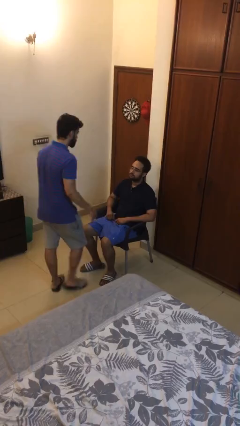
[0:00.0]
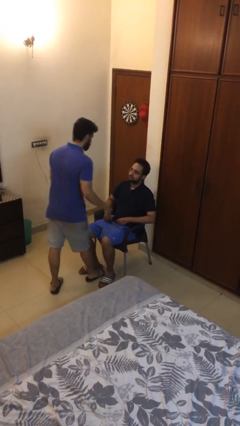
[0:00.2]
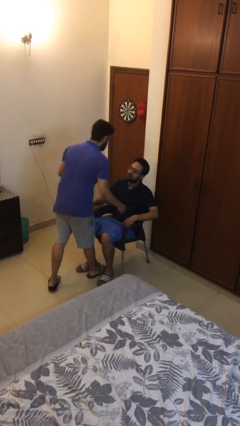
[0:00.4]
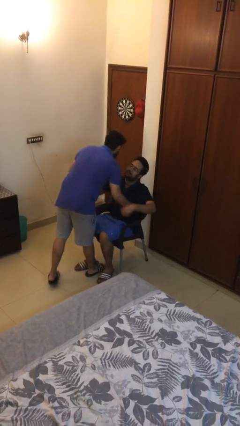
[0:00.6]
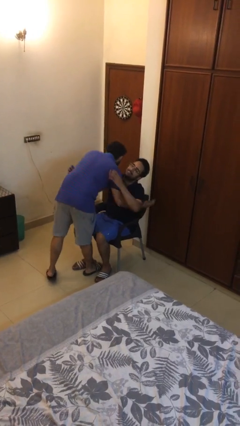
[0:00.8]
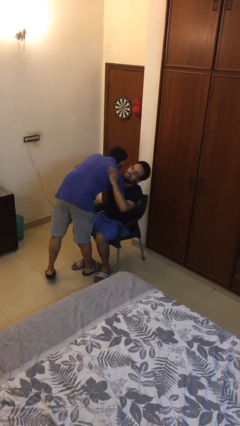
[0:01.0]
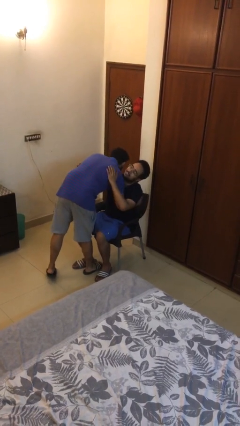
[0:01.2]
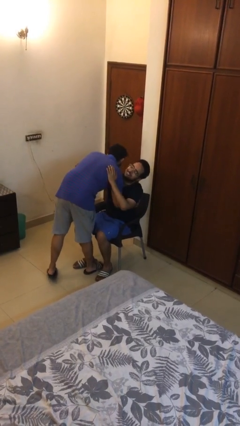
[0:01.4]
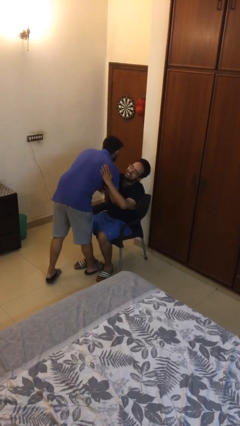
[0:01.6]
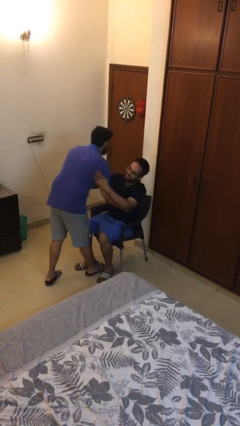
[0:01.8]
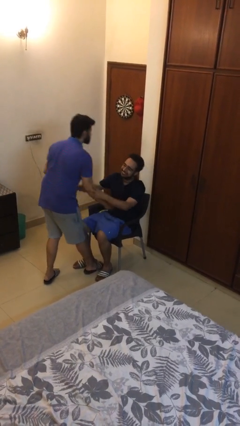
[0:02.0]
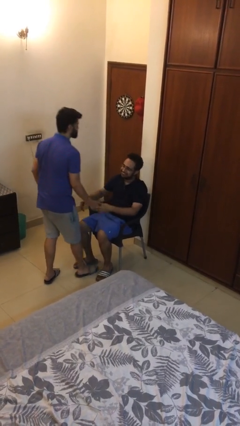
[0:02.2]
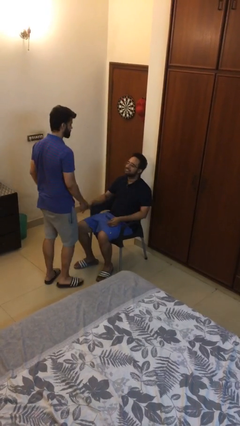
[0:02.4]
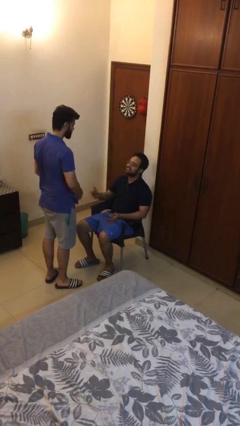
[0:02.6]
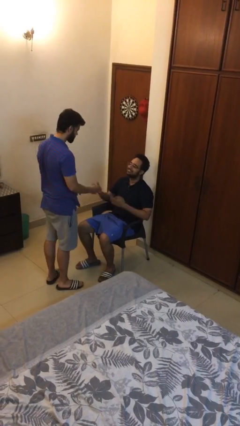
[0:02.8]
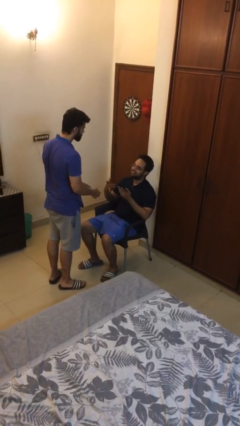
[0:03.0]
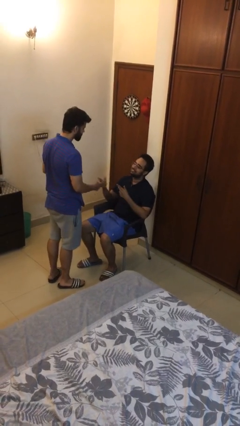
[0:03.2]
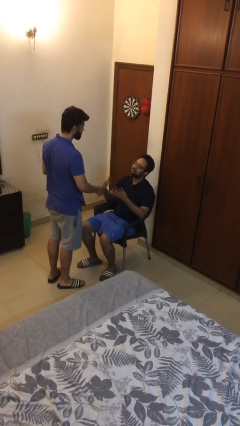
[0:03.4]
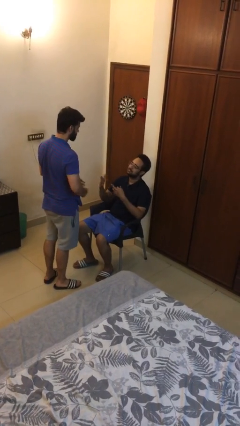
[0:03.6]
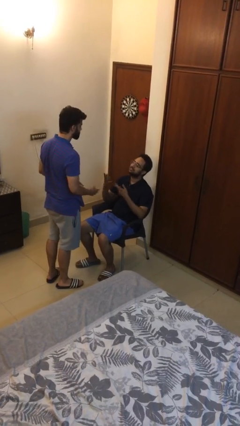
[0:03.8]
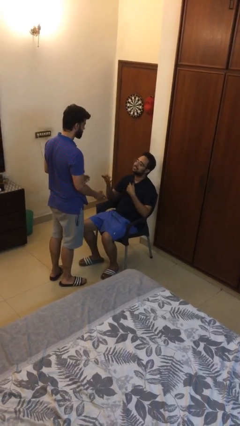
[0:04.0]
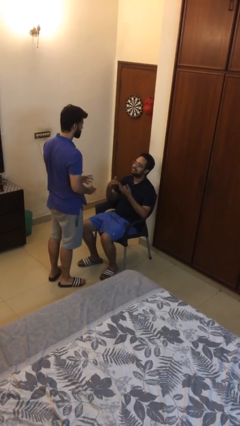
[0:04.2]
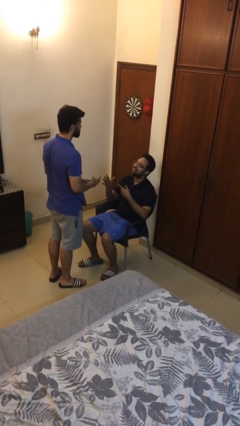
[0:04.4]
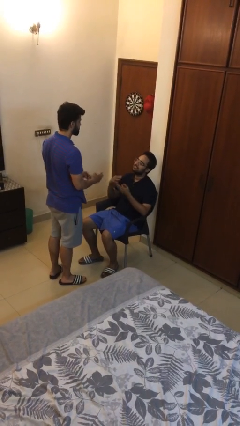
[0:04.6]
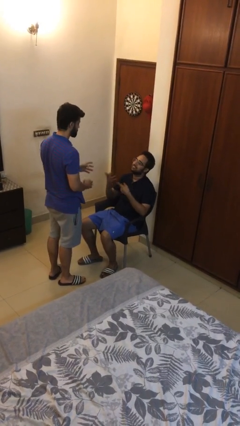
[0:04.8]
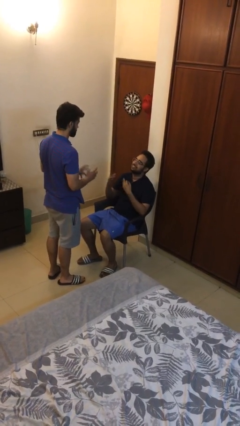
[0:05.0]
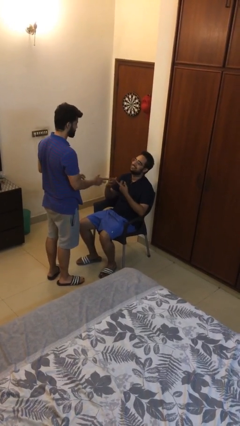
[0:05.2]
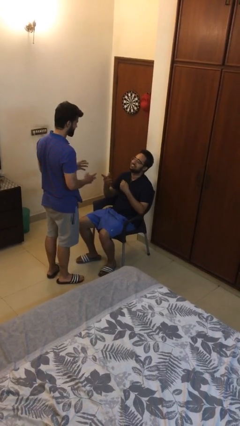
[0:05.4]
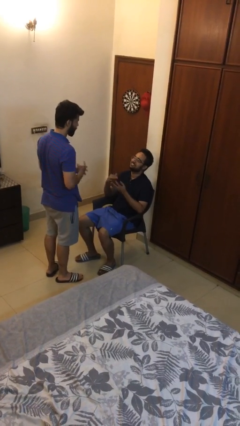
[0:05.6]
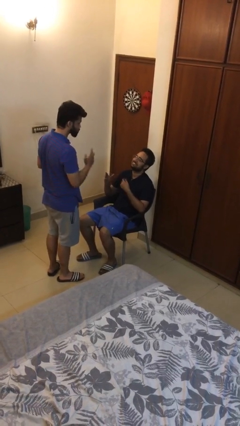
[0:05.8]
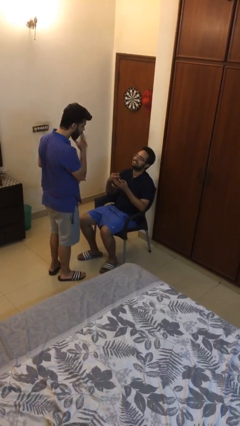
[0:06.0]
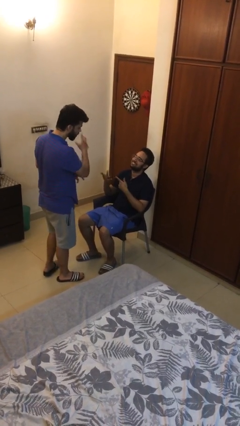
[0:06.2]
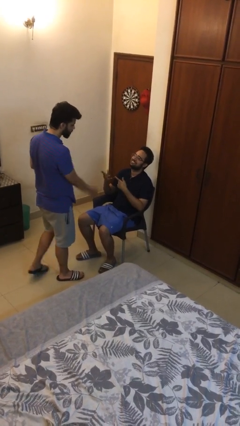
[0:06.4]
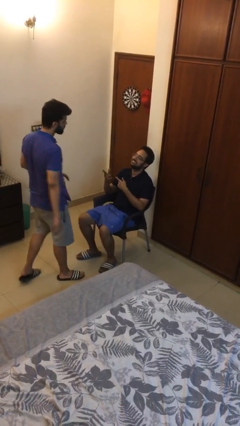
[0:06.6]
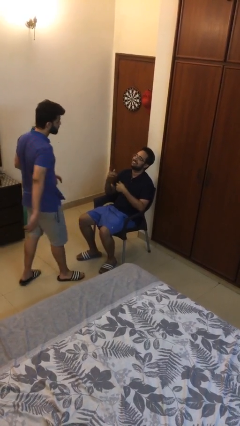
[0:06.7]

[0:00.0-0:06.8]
person embraces person

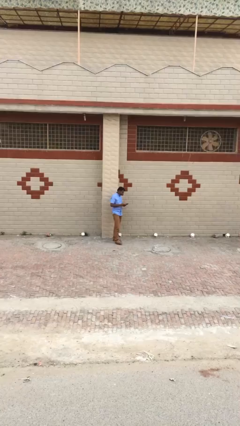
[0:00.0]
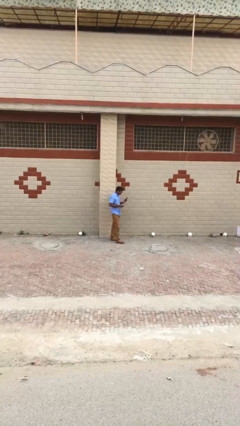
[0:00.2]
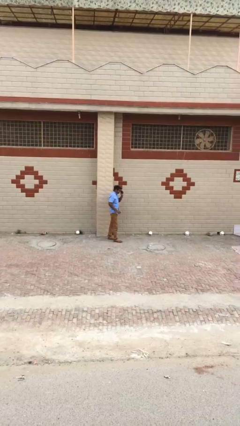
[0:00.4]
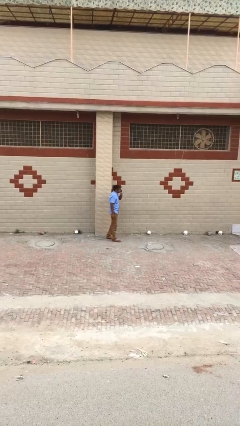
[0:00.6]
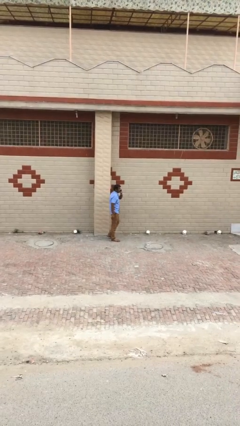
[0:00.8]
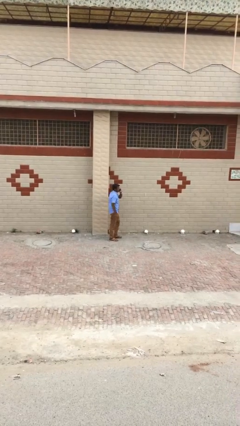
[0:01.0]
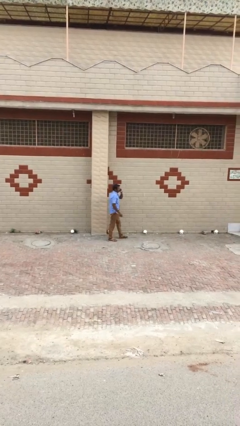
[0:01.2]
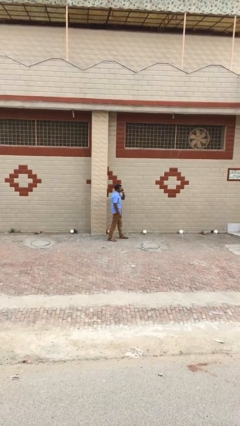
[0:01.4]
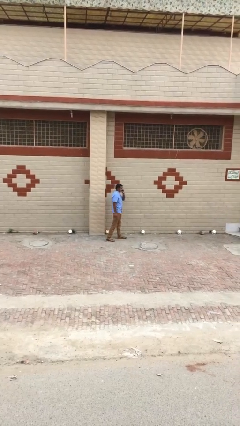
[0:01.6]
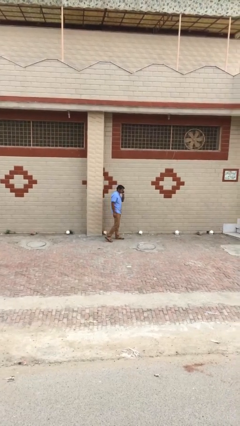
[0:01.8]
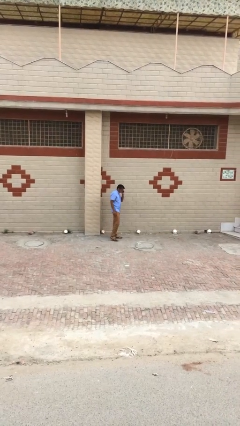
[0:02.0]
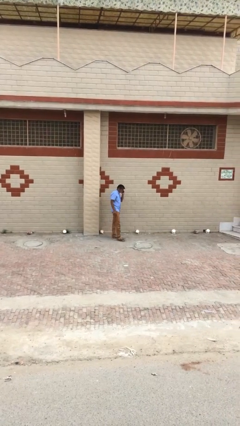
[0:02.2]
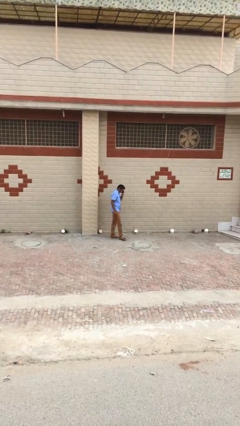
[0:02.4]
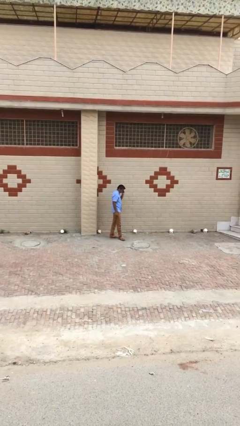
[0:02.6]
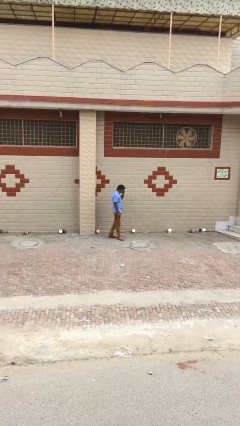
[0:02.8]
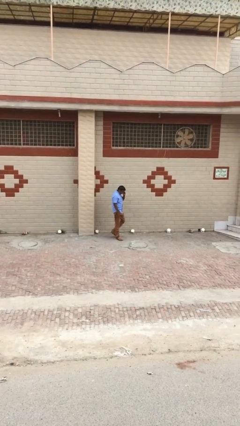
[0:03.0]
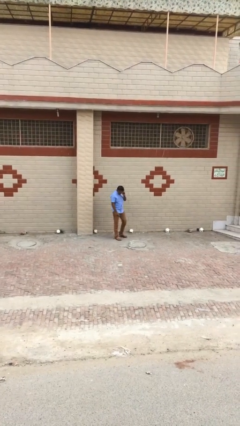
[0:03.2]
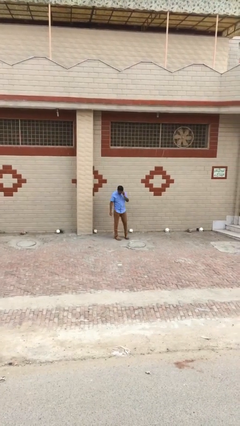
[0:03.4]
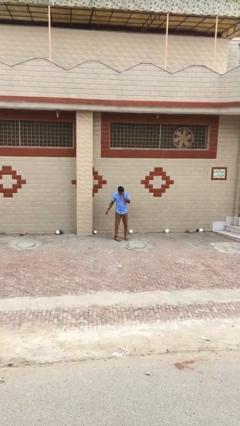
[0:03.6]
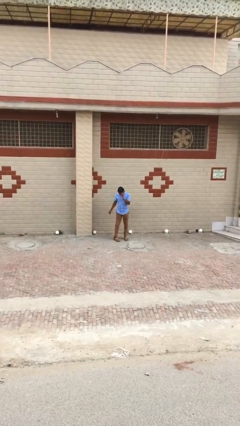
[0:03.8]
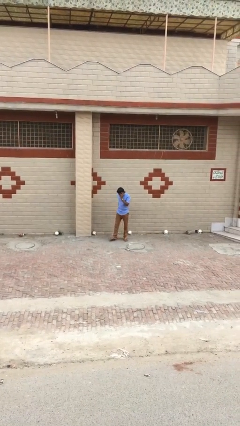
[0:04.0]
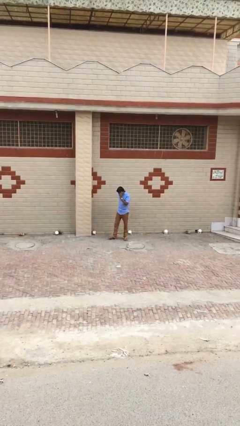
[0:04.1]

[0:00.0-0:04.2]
person talks on phone

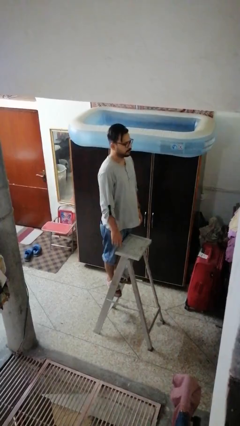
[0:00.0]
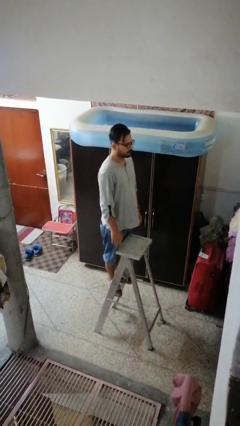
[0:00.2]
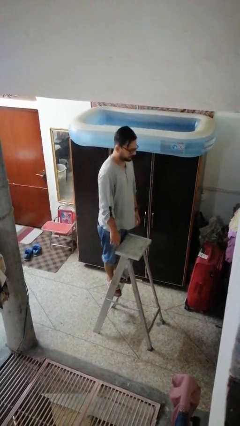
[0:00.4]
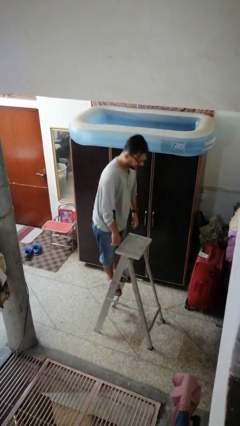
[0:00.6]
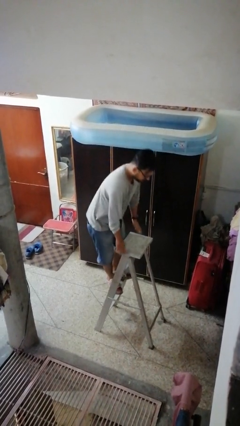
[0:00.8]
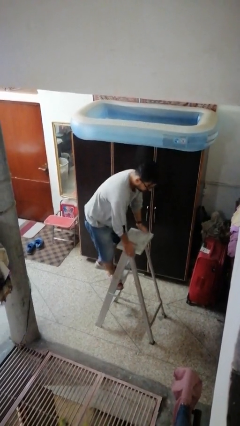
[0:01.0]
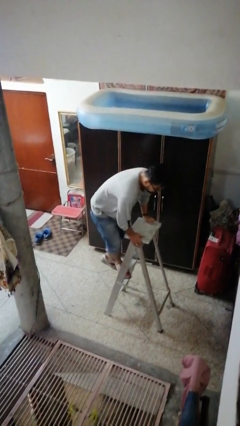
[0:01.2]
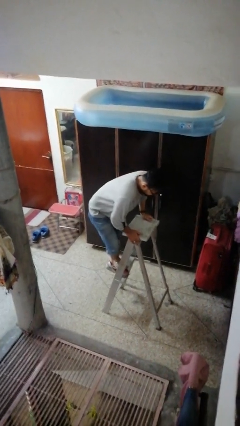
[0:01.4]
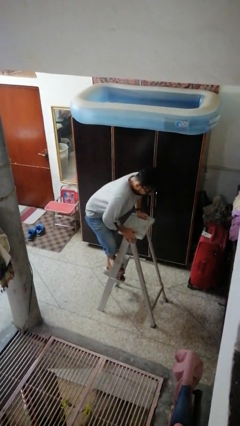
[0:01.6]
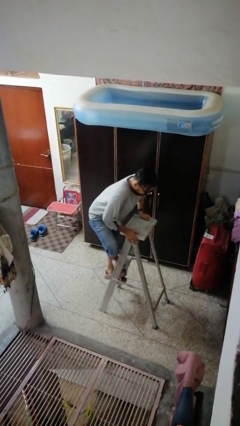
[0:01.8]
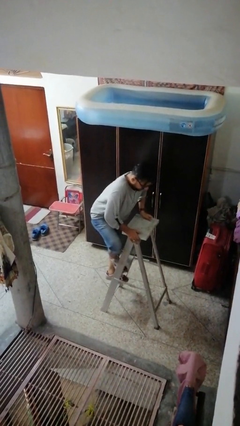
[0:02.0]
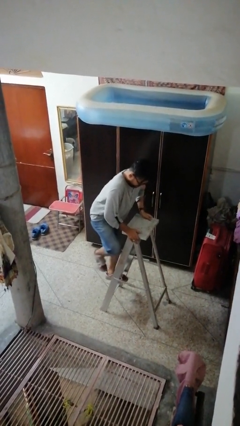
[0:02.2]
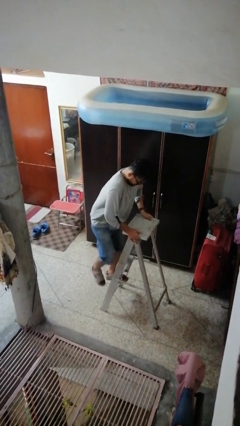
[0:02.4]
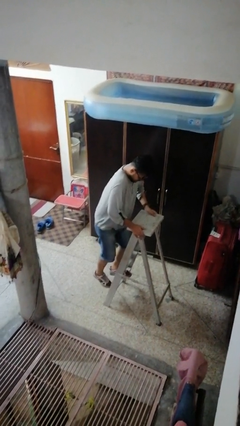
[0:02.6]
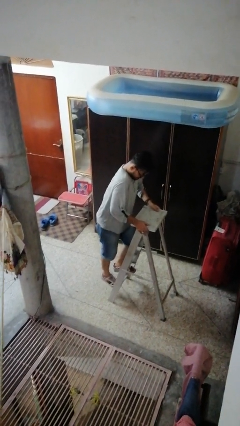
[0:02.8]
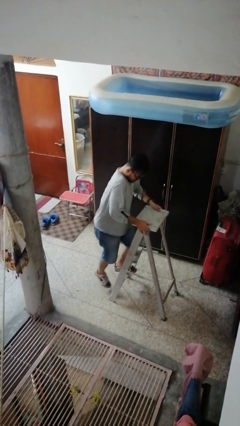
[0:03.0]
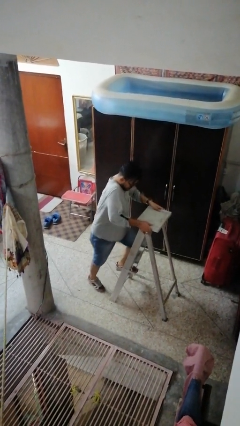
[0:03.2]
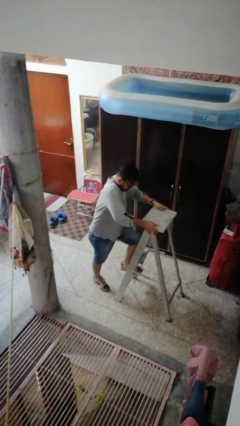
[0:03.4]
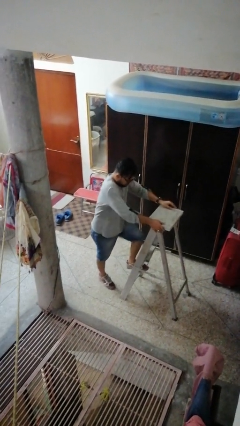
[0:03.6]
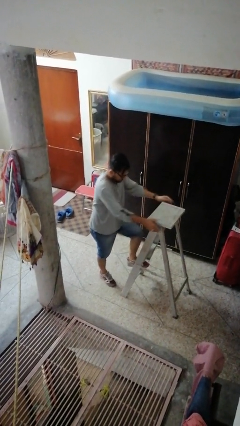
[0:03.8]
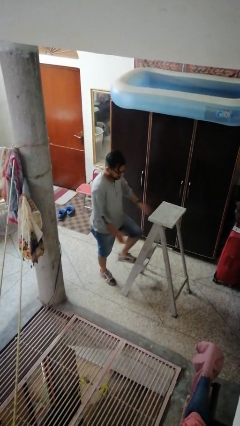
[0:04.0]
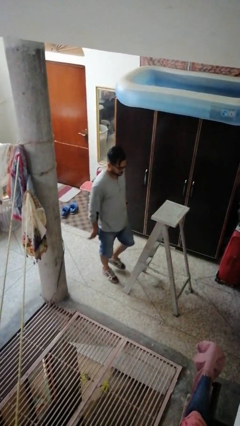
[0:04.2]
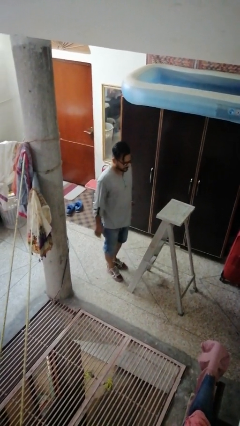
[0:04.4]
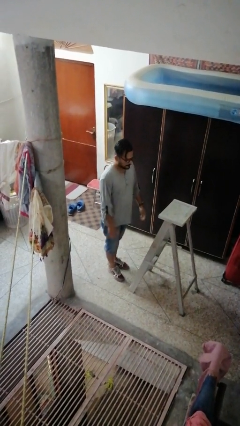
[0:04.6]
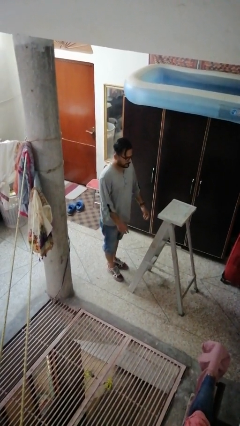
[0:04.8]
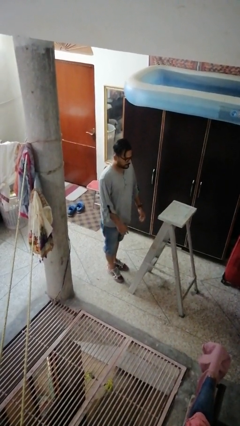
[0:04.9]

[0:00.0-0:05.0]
person climbs down ladder

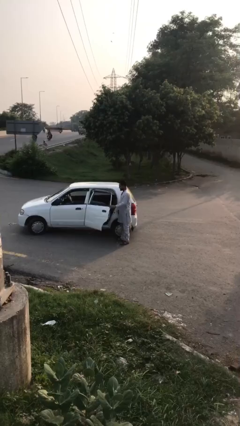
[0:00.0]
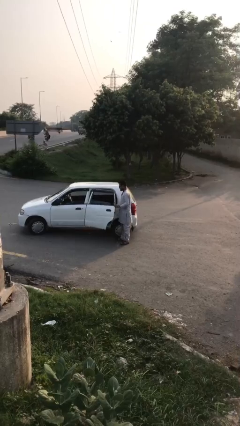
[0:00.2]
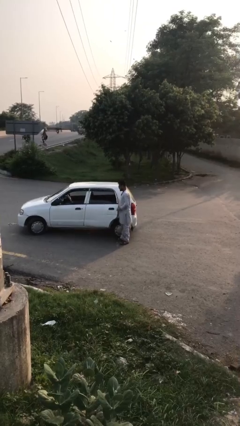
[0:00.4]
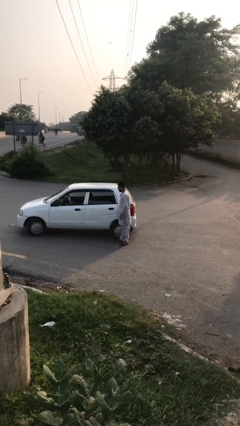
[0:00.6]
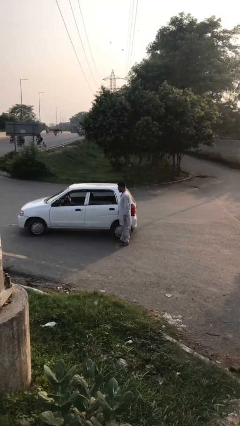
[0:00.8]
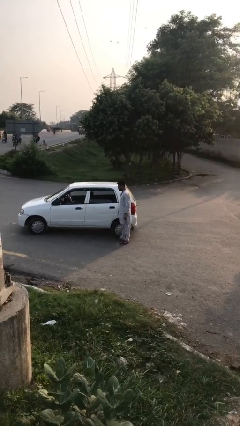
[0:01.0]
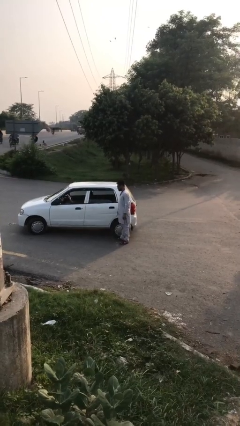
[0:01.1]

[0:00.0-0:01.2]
person closes car door

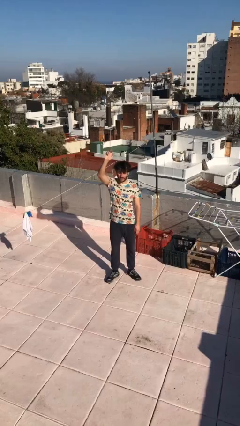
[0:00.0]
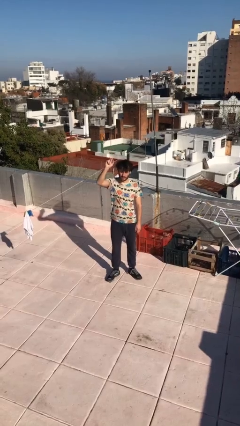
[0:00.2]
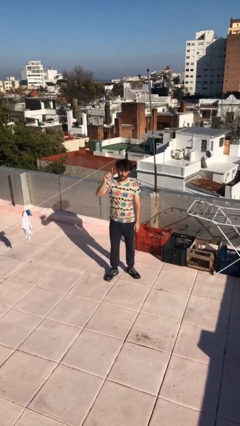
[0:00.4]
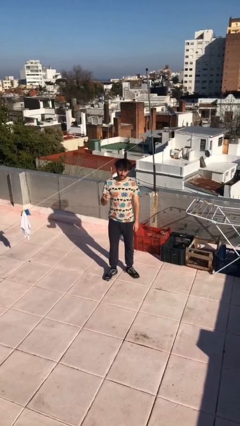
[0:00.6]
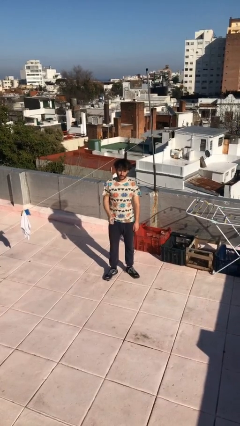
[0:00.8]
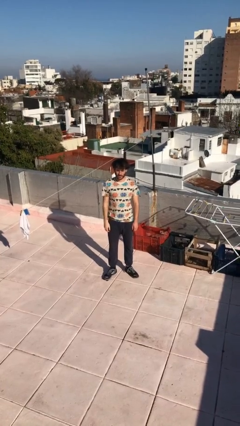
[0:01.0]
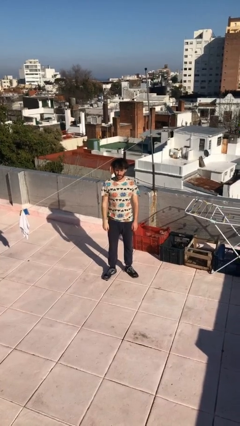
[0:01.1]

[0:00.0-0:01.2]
person gestures lower hand
